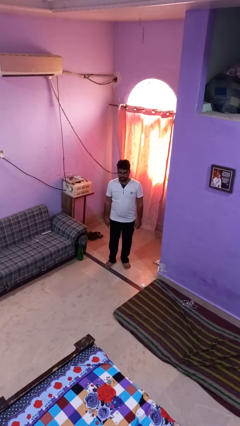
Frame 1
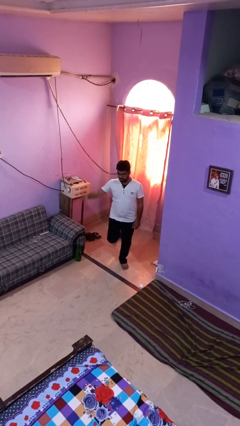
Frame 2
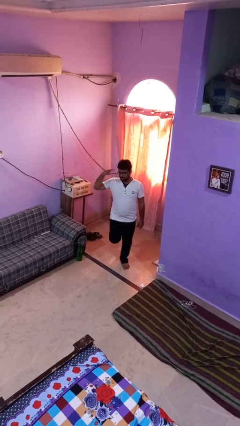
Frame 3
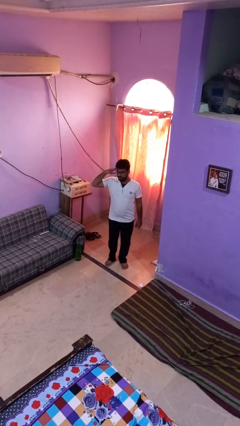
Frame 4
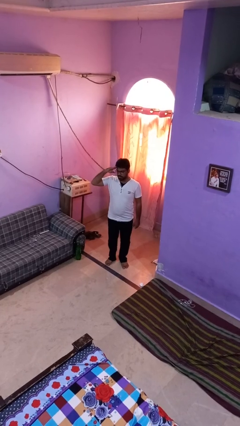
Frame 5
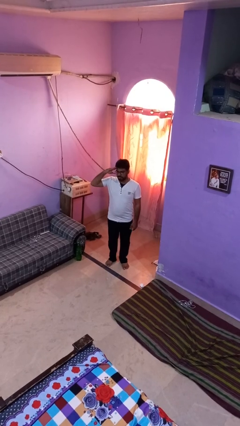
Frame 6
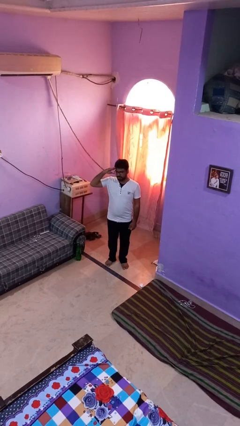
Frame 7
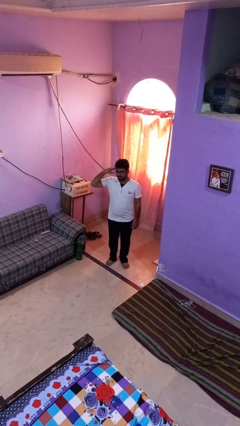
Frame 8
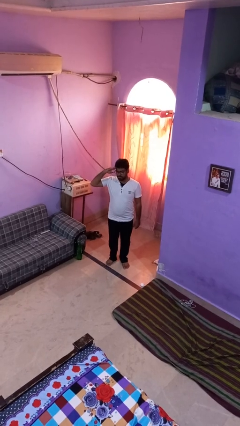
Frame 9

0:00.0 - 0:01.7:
person salutes

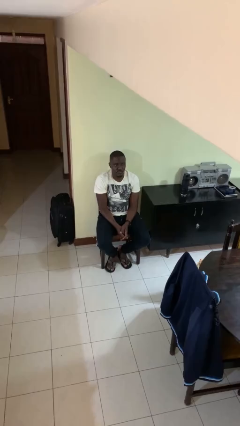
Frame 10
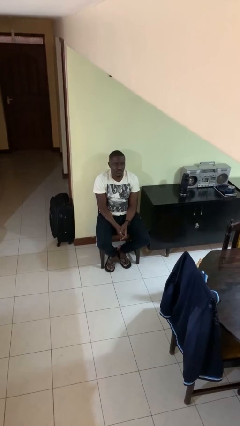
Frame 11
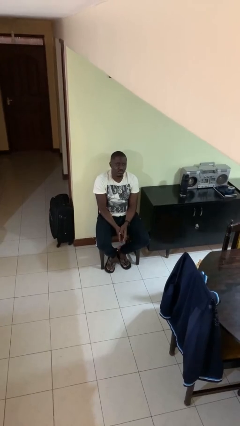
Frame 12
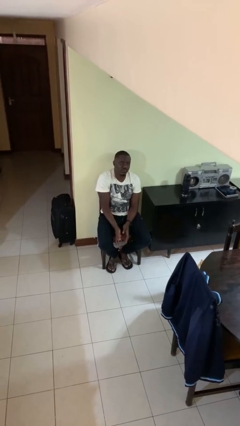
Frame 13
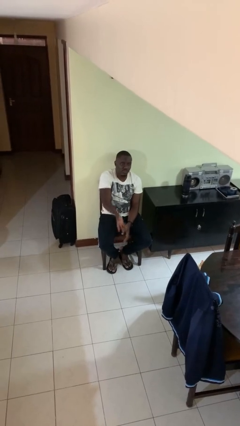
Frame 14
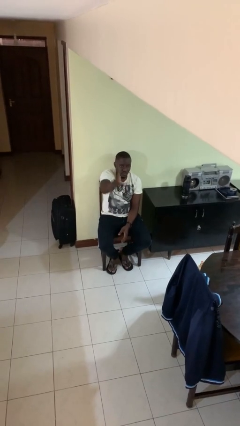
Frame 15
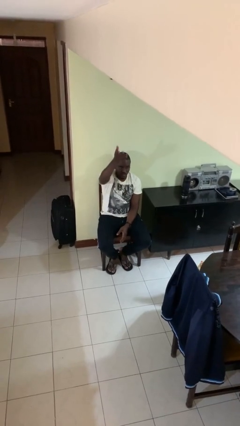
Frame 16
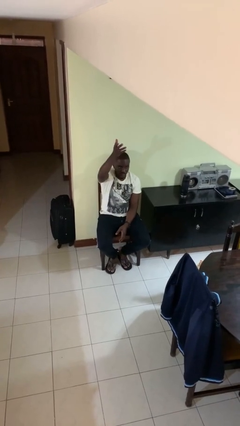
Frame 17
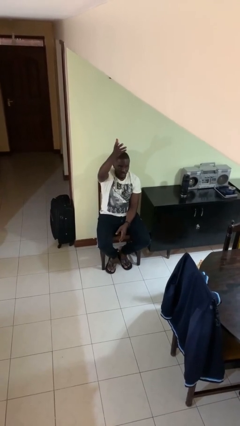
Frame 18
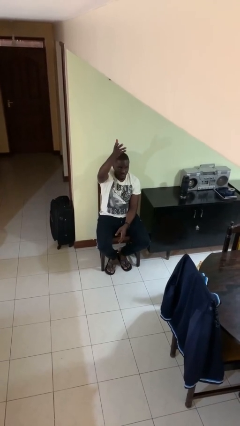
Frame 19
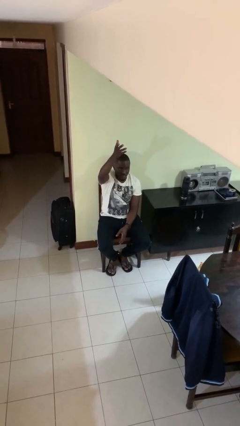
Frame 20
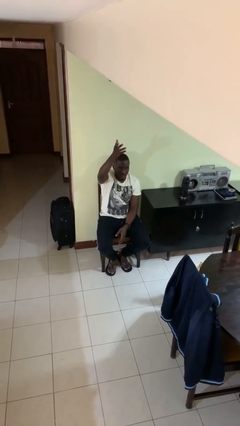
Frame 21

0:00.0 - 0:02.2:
person gestures swipe up

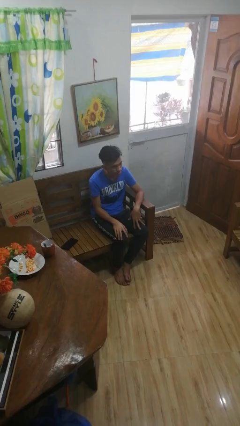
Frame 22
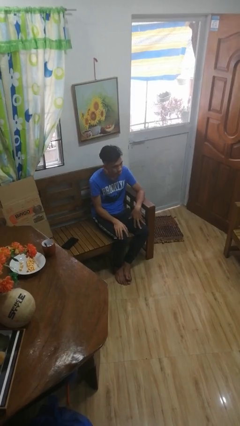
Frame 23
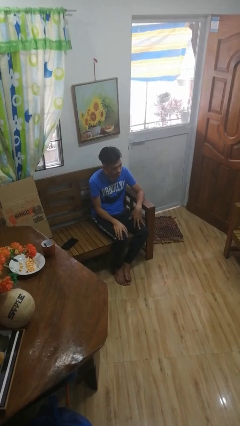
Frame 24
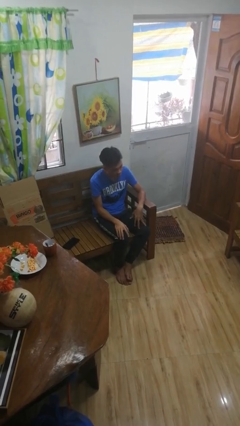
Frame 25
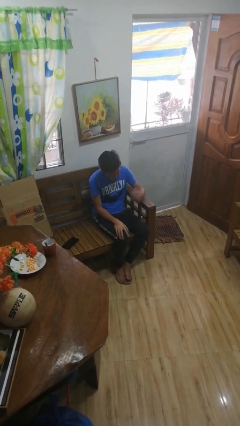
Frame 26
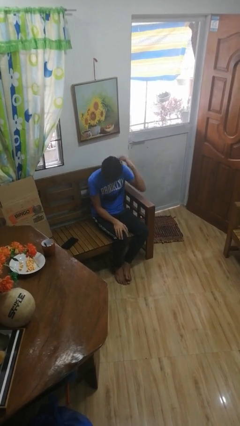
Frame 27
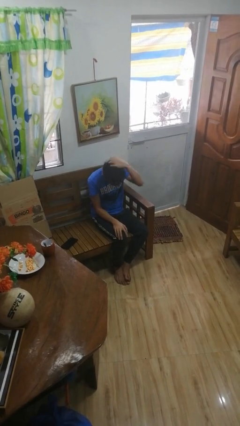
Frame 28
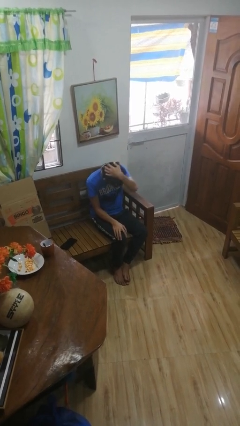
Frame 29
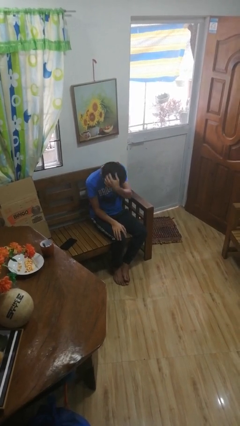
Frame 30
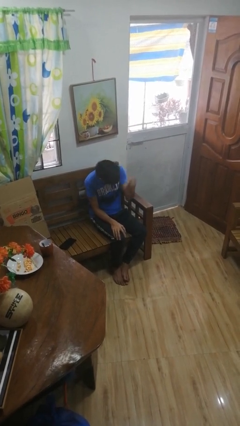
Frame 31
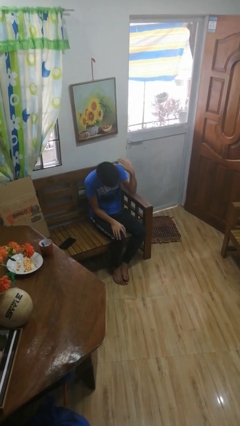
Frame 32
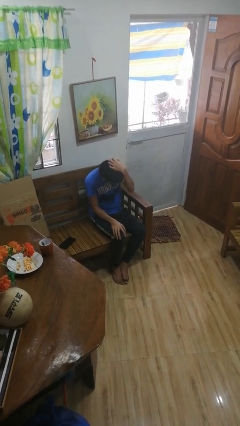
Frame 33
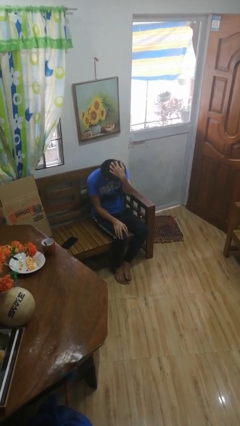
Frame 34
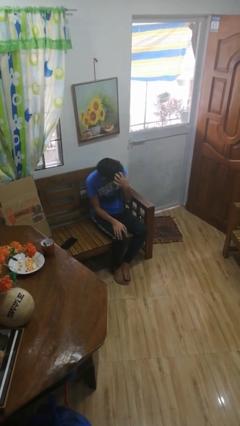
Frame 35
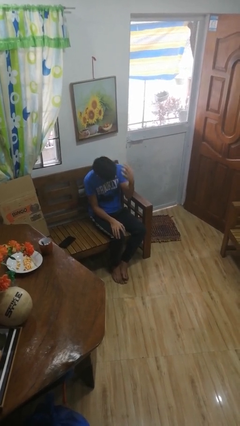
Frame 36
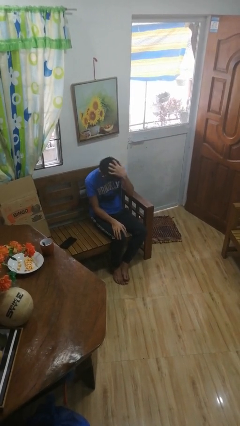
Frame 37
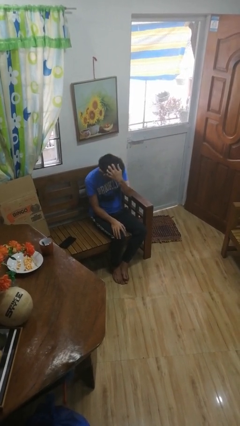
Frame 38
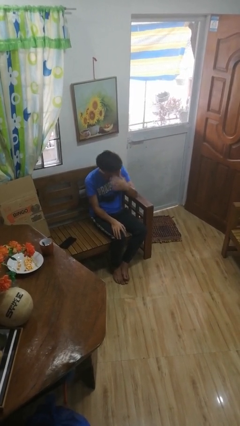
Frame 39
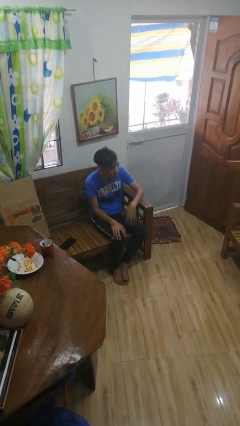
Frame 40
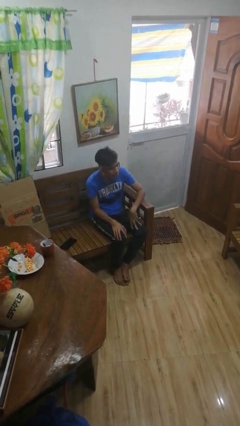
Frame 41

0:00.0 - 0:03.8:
person strokes hair

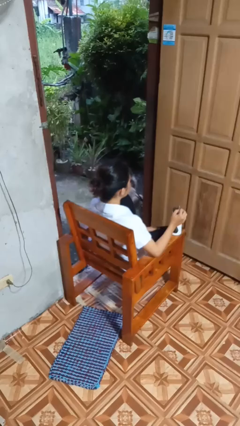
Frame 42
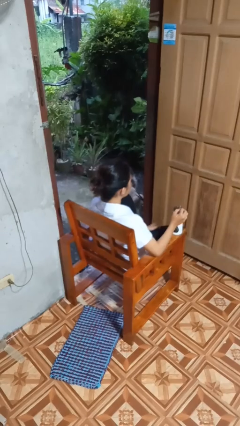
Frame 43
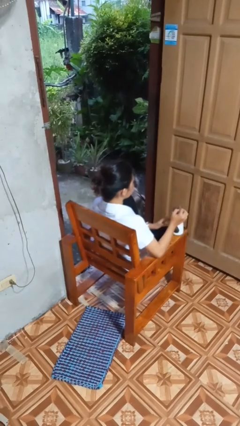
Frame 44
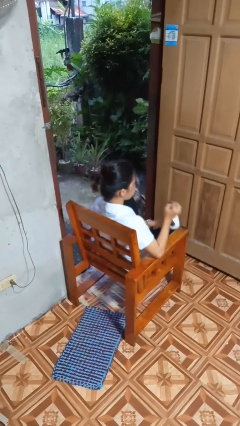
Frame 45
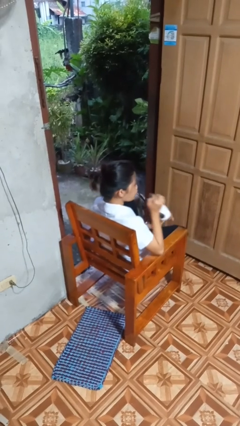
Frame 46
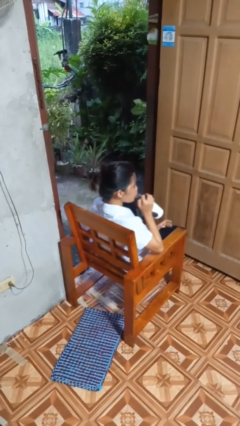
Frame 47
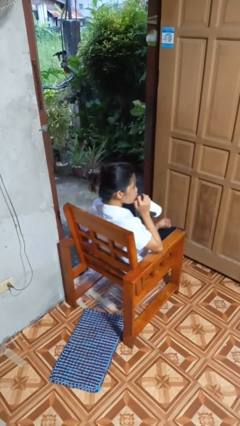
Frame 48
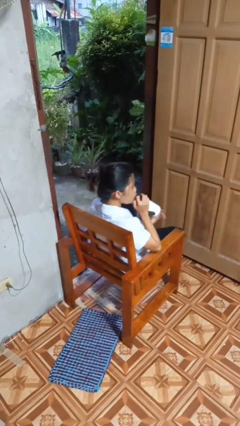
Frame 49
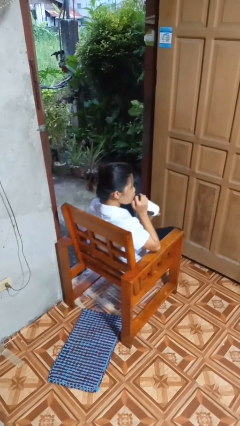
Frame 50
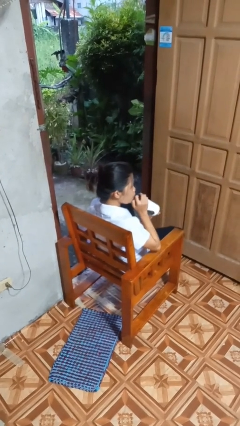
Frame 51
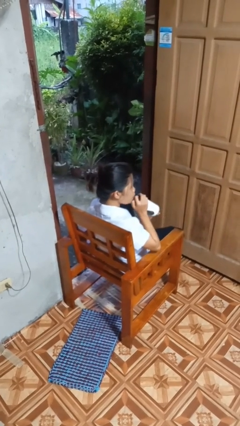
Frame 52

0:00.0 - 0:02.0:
person drinks from straw

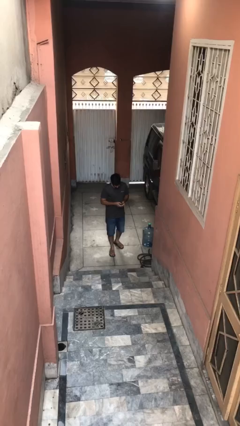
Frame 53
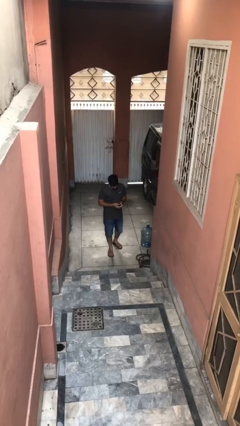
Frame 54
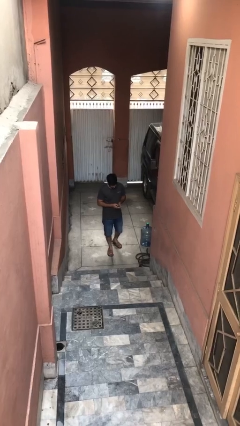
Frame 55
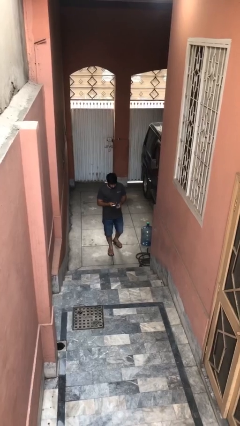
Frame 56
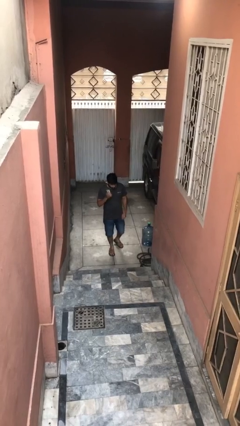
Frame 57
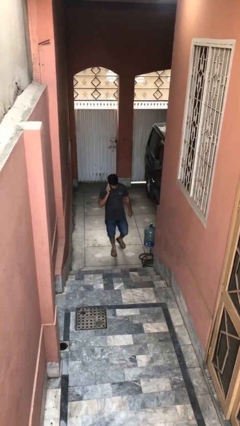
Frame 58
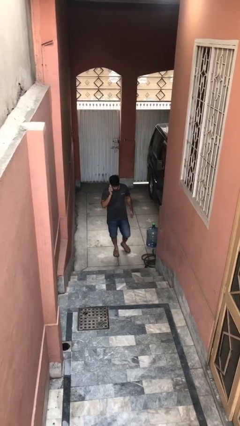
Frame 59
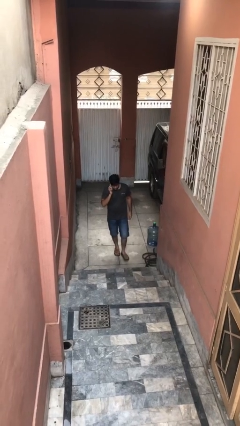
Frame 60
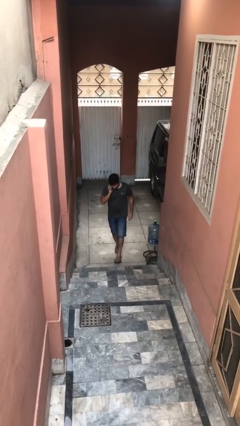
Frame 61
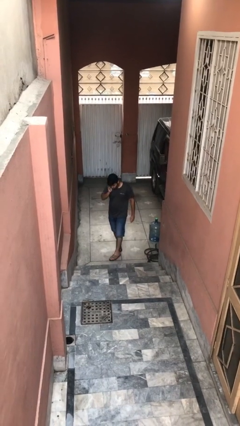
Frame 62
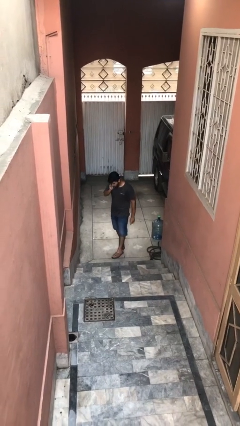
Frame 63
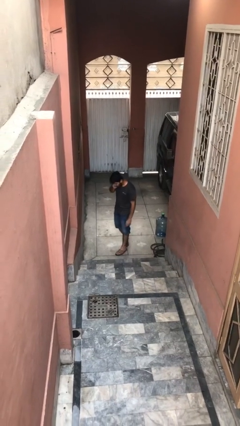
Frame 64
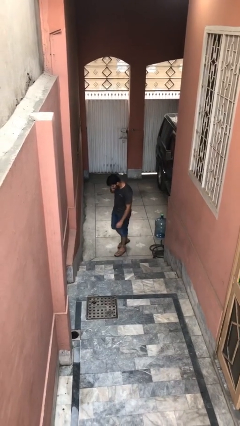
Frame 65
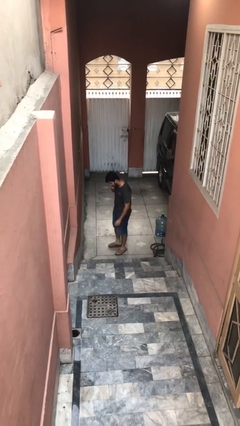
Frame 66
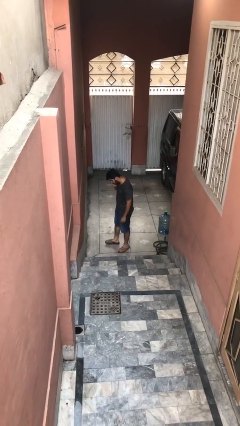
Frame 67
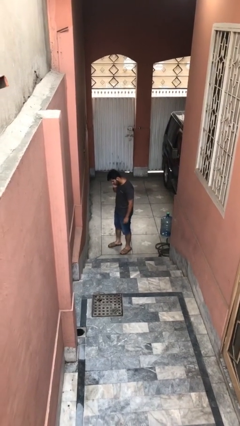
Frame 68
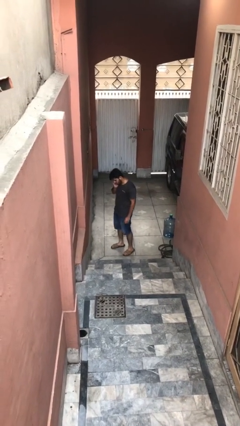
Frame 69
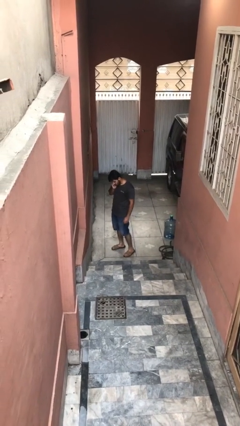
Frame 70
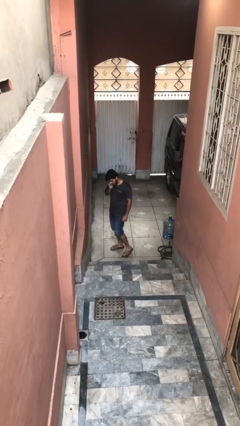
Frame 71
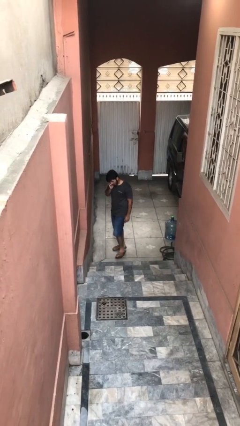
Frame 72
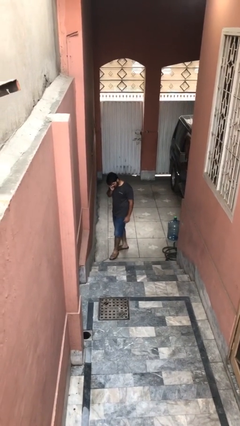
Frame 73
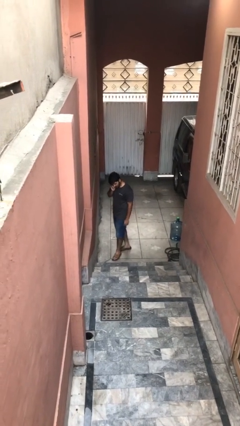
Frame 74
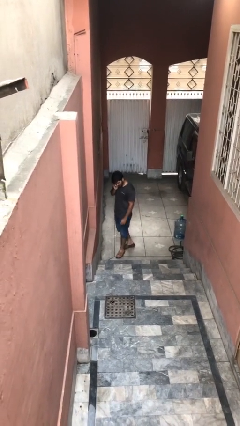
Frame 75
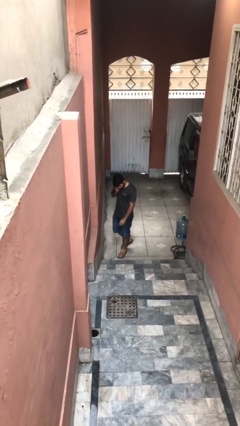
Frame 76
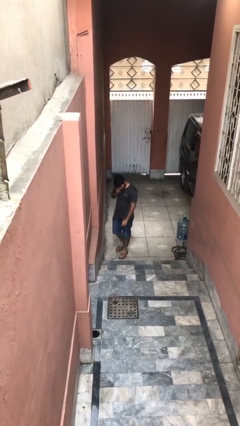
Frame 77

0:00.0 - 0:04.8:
person talks on phone

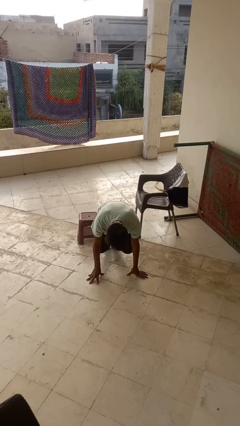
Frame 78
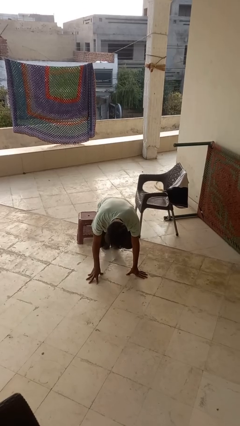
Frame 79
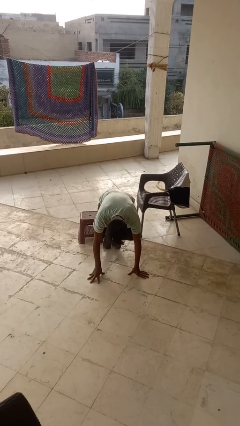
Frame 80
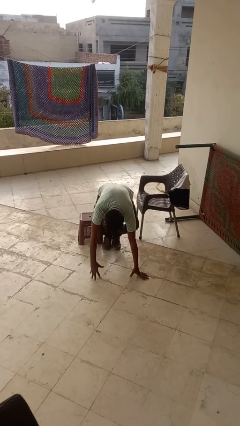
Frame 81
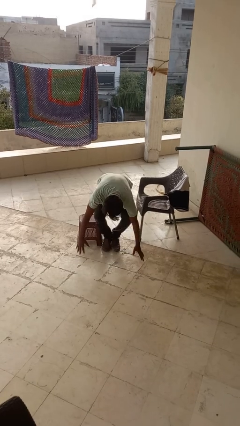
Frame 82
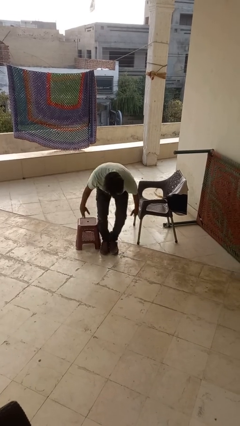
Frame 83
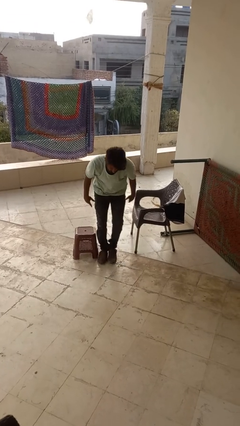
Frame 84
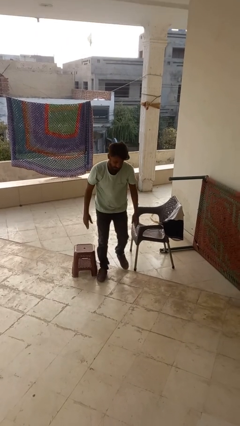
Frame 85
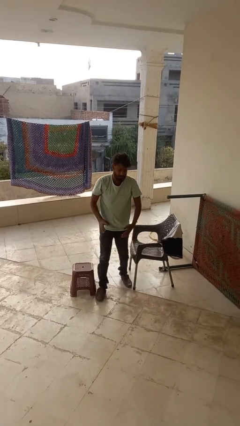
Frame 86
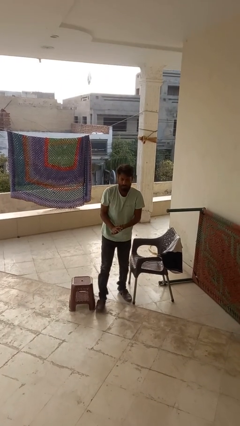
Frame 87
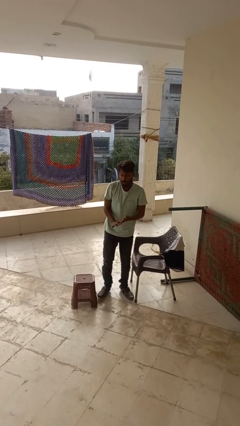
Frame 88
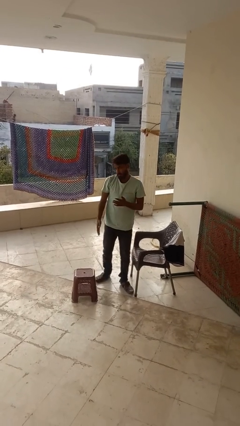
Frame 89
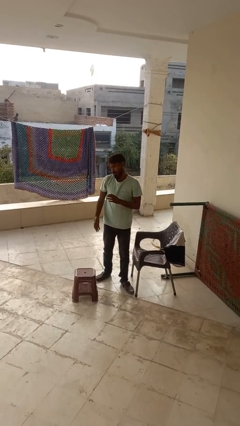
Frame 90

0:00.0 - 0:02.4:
person stands up from floor

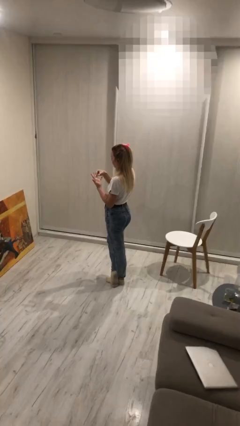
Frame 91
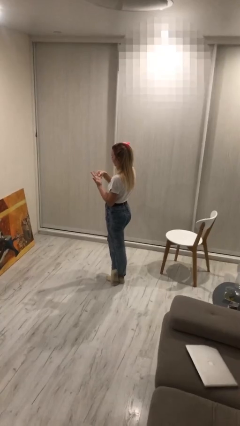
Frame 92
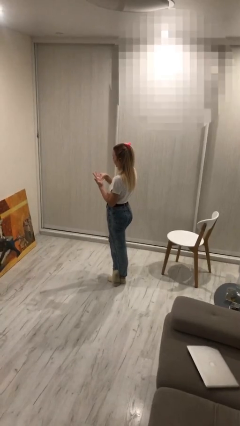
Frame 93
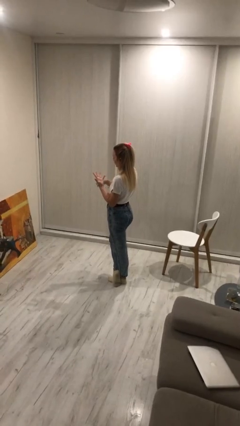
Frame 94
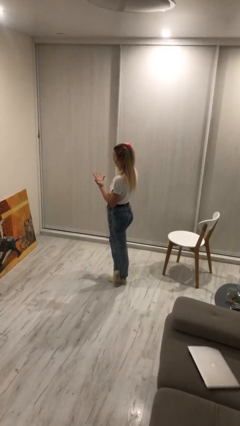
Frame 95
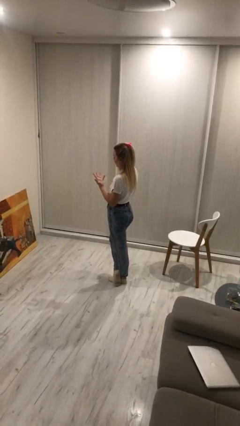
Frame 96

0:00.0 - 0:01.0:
person puts on ring
